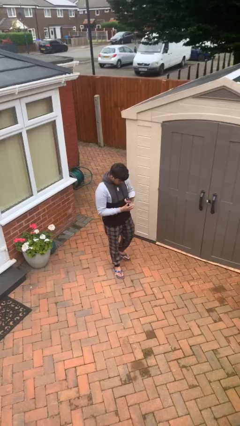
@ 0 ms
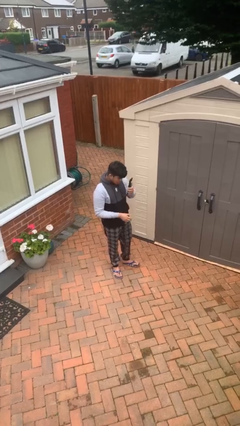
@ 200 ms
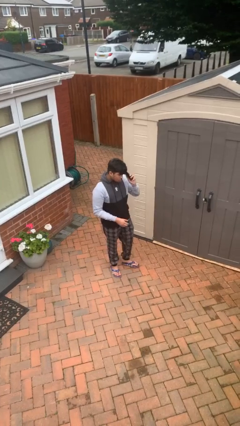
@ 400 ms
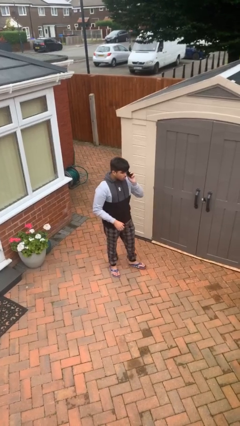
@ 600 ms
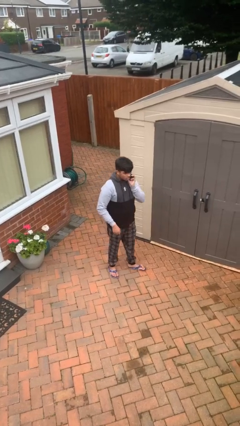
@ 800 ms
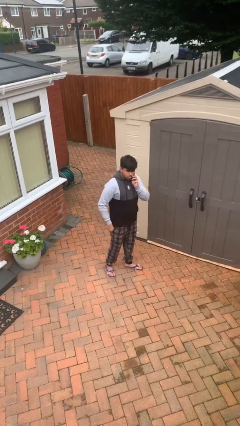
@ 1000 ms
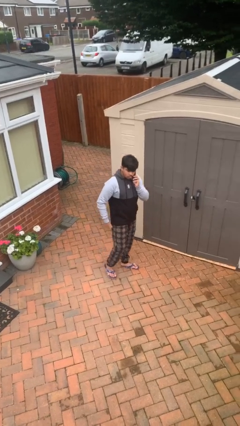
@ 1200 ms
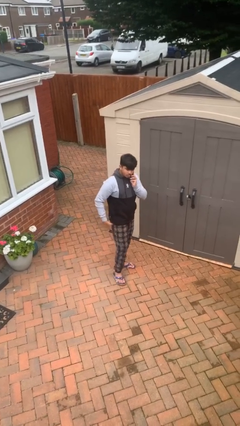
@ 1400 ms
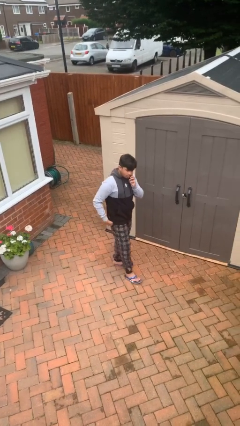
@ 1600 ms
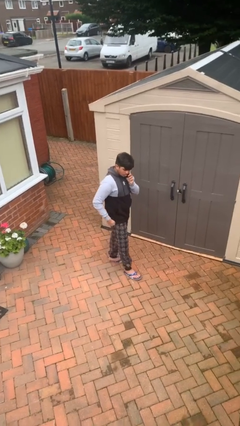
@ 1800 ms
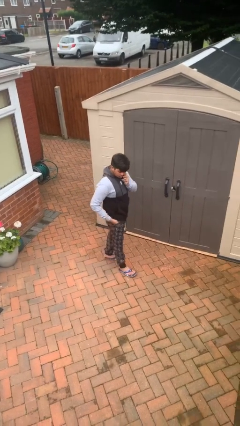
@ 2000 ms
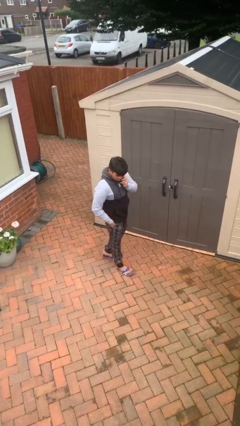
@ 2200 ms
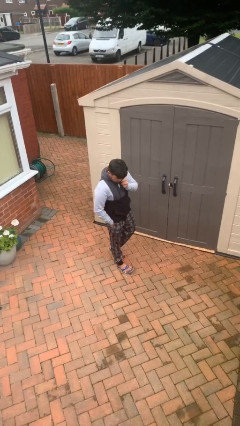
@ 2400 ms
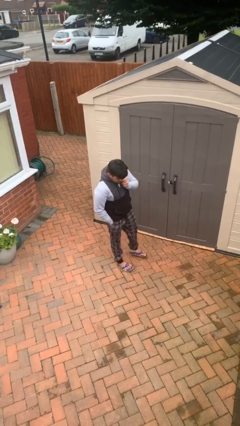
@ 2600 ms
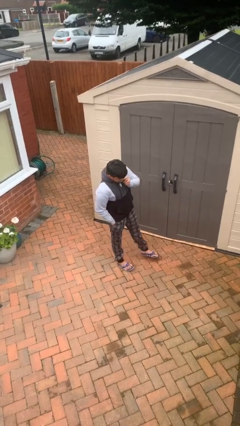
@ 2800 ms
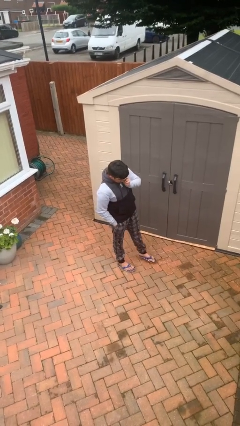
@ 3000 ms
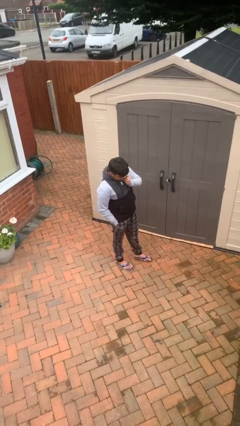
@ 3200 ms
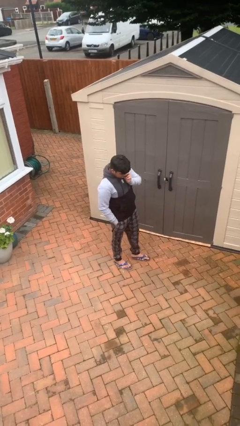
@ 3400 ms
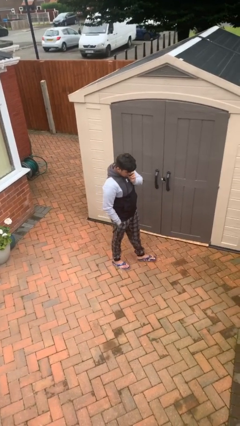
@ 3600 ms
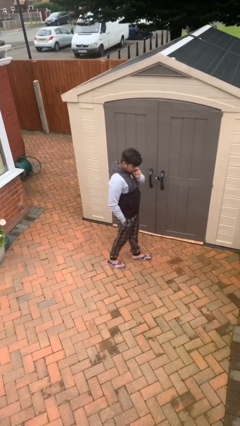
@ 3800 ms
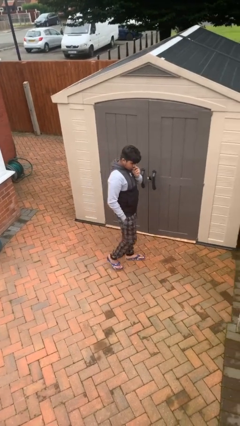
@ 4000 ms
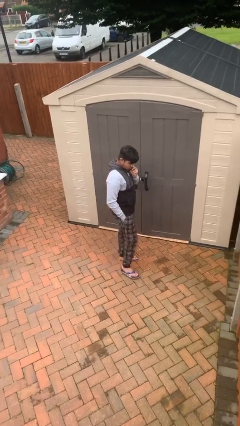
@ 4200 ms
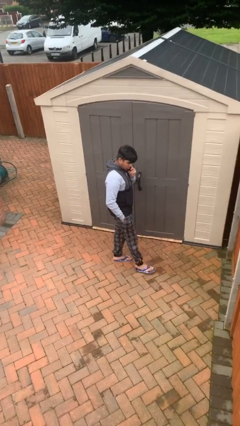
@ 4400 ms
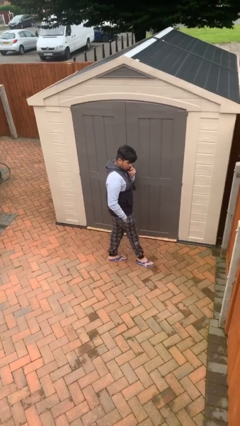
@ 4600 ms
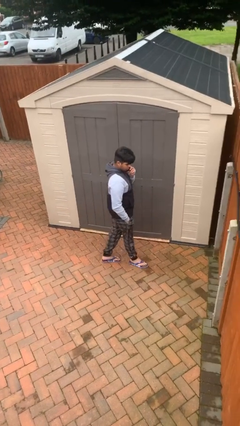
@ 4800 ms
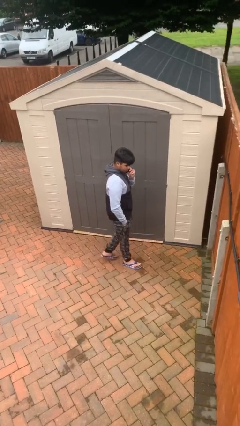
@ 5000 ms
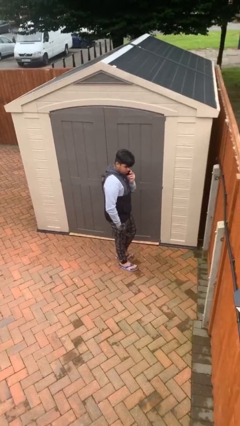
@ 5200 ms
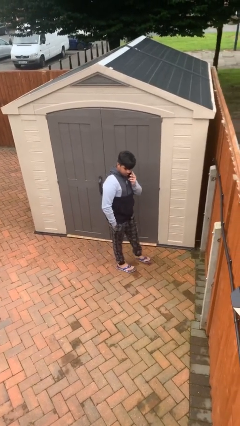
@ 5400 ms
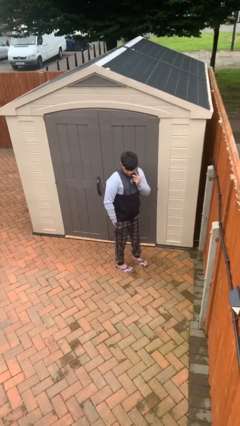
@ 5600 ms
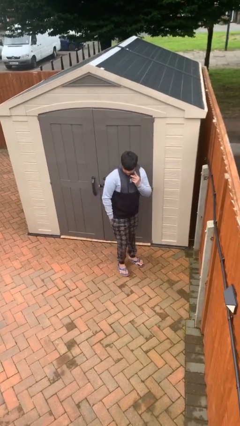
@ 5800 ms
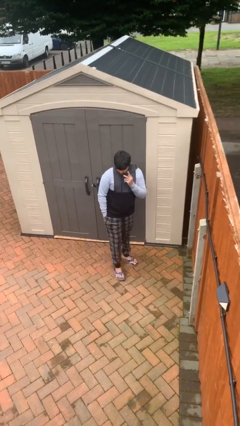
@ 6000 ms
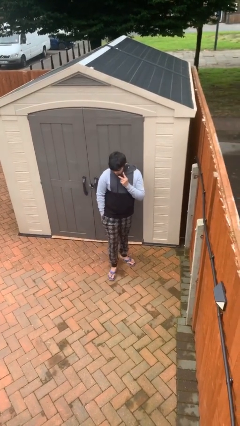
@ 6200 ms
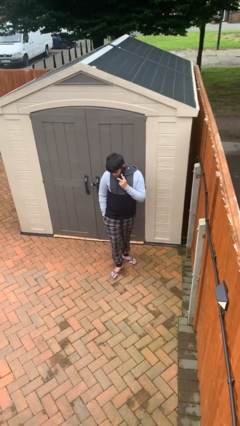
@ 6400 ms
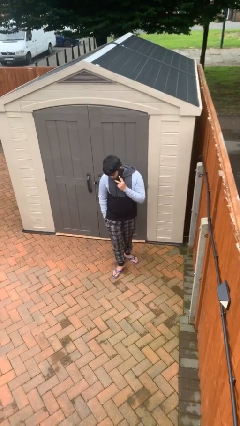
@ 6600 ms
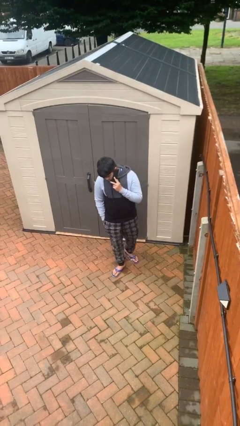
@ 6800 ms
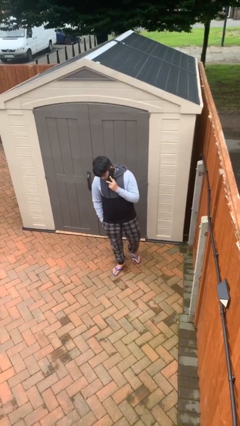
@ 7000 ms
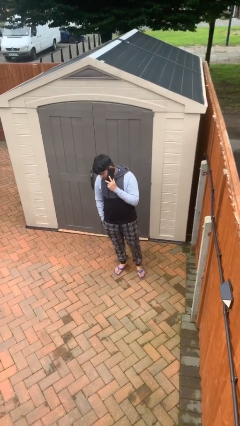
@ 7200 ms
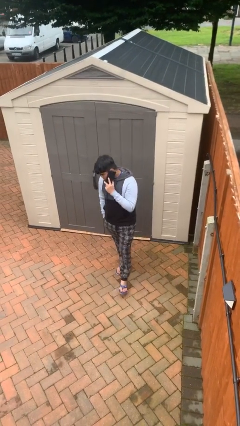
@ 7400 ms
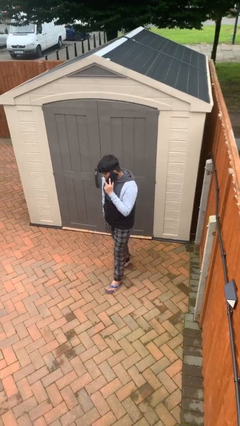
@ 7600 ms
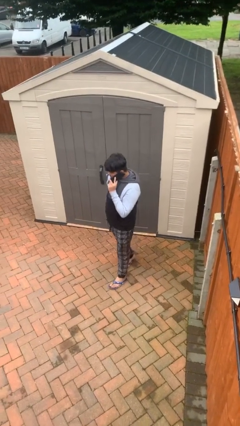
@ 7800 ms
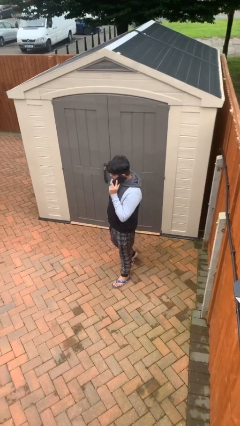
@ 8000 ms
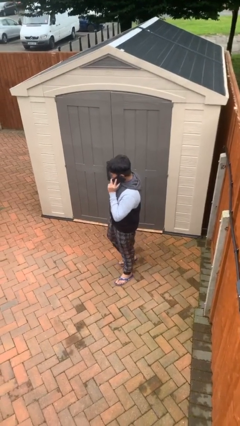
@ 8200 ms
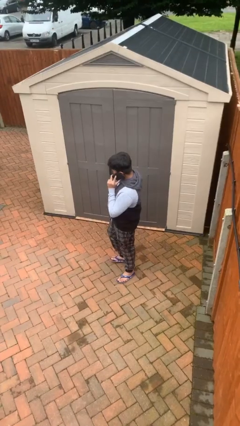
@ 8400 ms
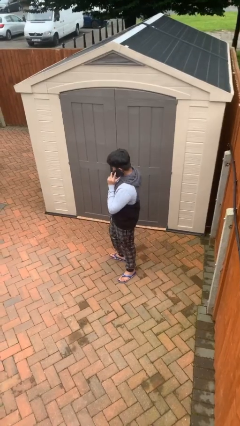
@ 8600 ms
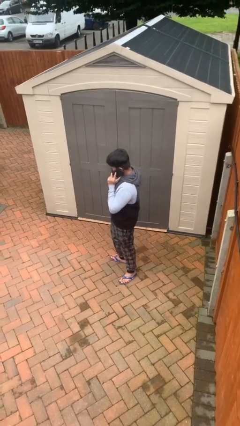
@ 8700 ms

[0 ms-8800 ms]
person talks on phone

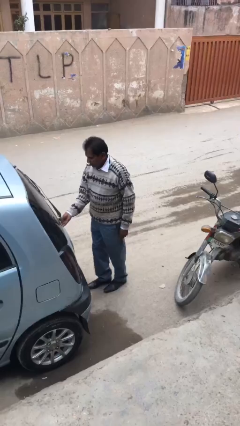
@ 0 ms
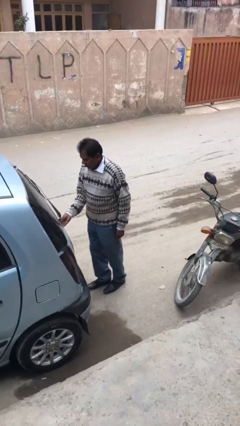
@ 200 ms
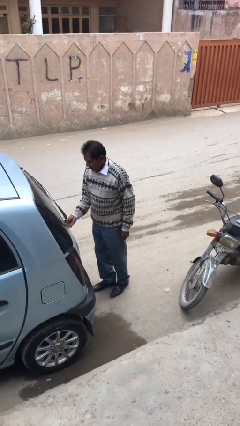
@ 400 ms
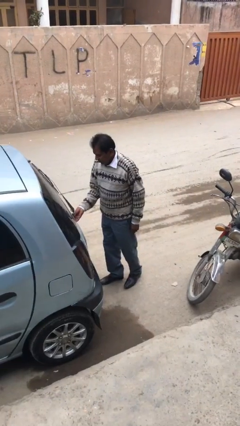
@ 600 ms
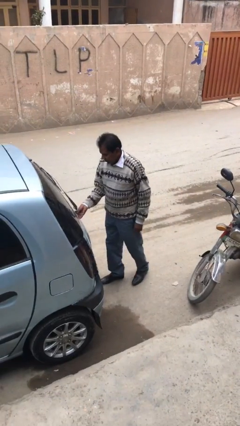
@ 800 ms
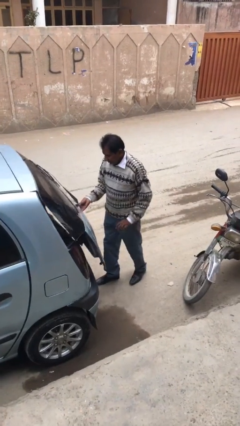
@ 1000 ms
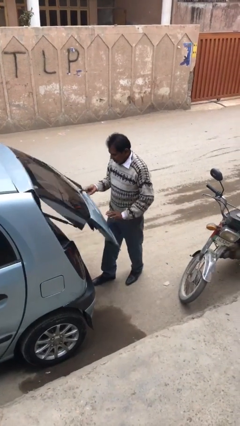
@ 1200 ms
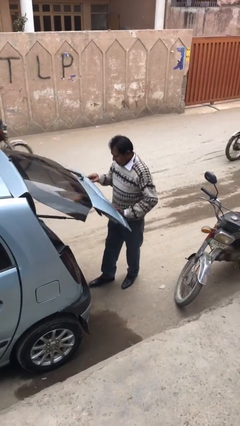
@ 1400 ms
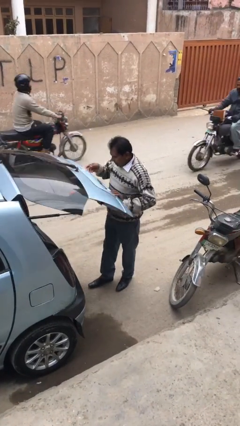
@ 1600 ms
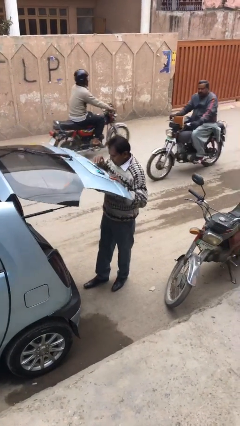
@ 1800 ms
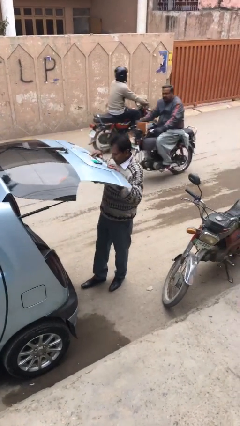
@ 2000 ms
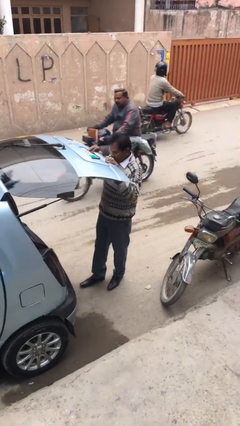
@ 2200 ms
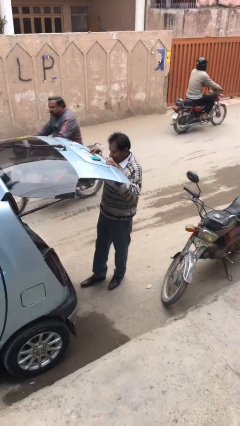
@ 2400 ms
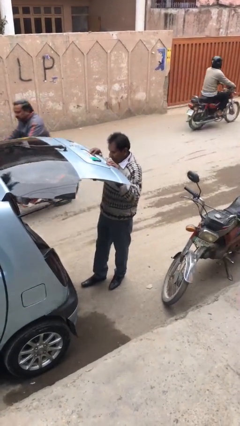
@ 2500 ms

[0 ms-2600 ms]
person opens car trunk

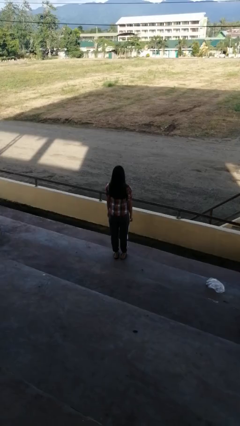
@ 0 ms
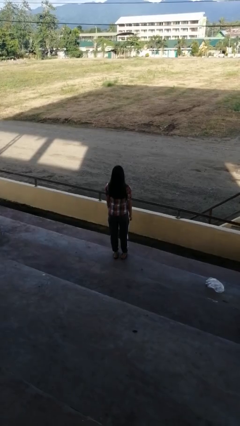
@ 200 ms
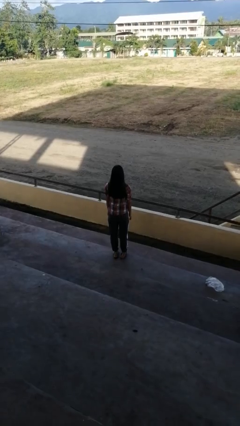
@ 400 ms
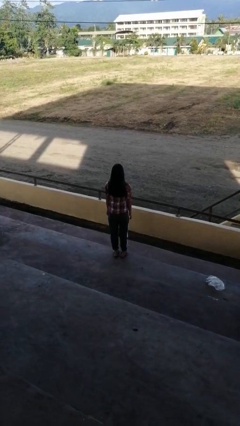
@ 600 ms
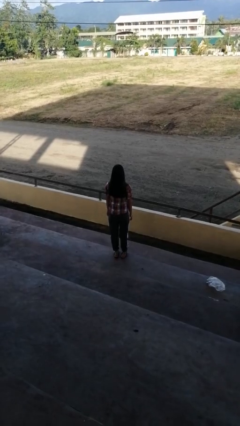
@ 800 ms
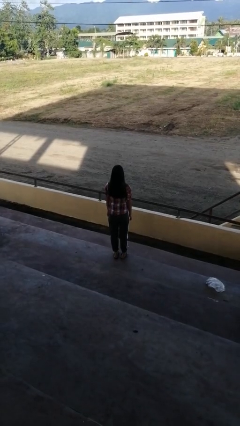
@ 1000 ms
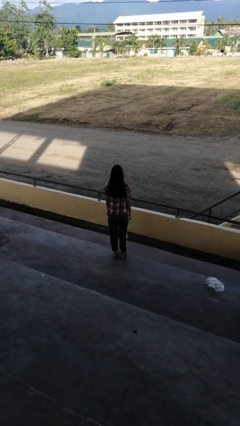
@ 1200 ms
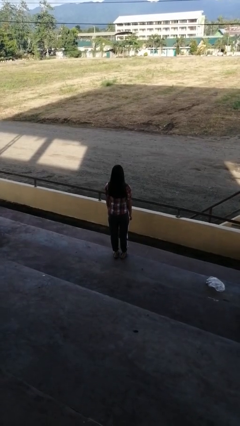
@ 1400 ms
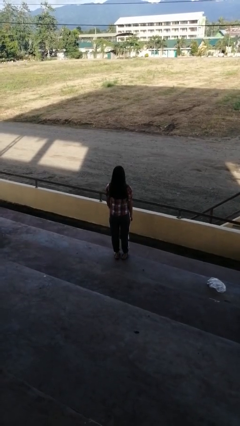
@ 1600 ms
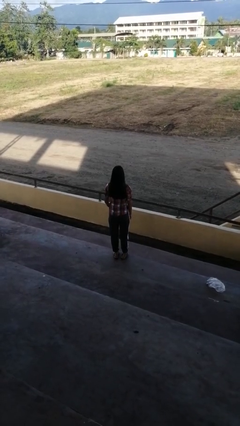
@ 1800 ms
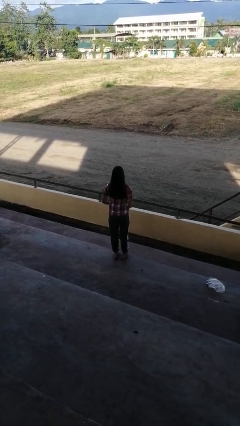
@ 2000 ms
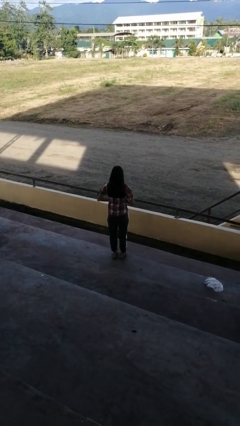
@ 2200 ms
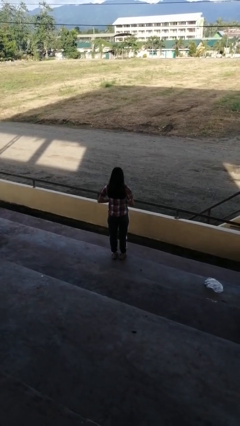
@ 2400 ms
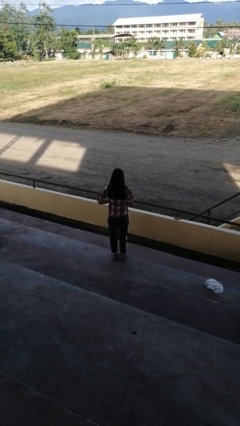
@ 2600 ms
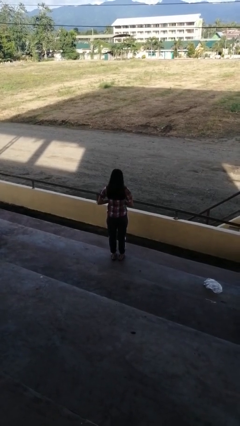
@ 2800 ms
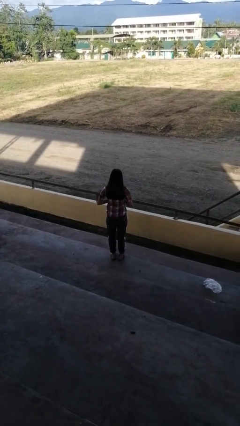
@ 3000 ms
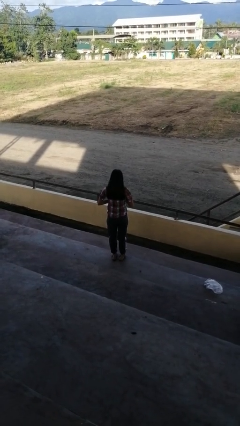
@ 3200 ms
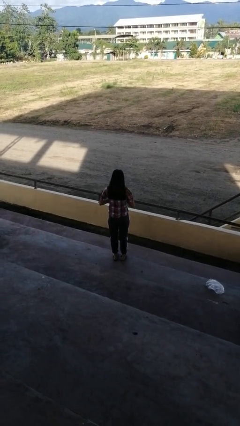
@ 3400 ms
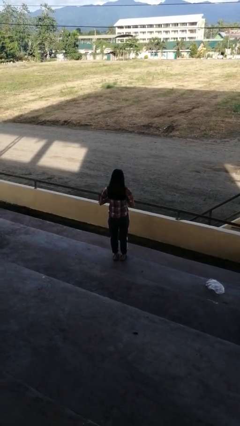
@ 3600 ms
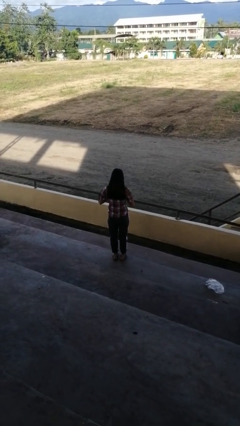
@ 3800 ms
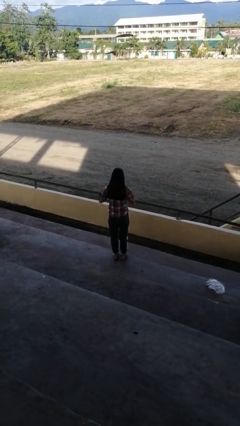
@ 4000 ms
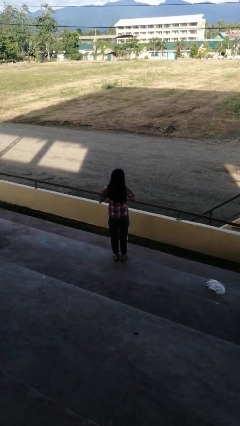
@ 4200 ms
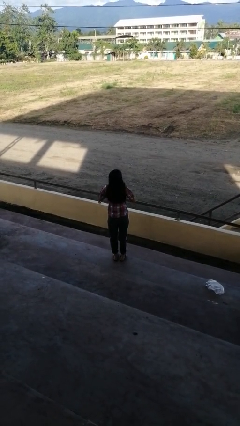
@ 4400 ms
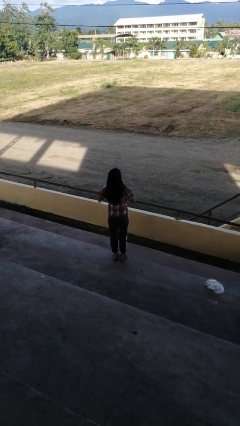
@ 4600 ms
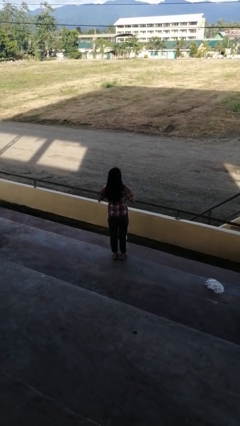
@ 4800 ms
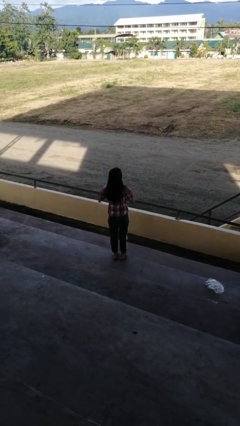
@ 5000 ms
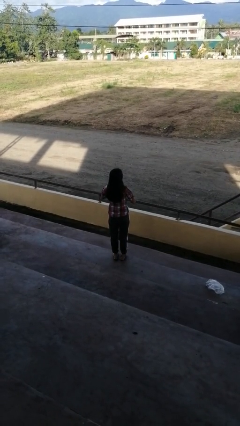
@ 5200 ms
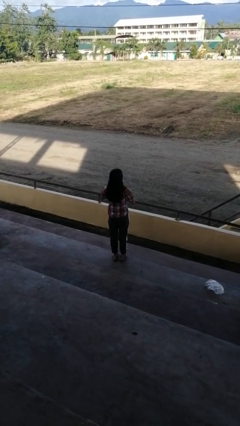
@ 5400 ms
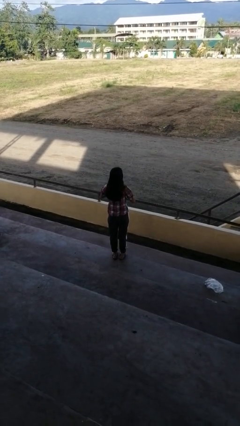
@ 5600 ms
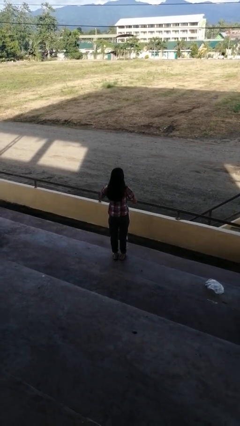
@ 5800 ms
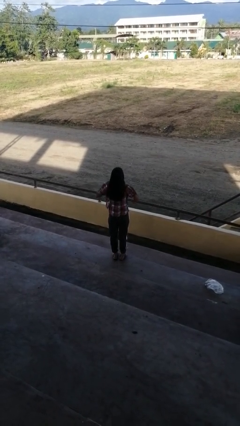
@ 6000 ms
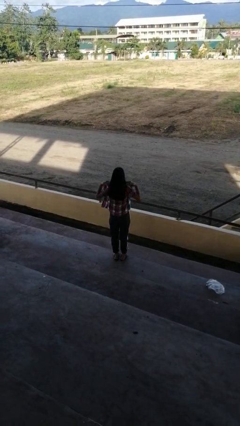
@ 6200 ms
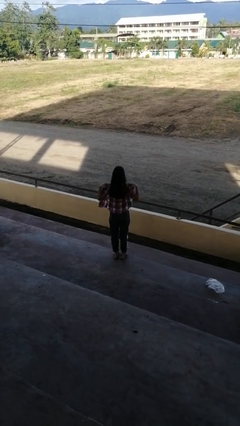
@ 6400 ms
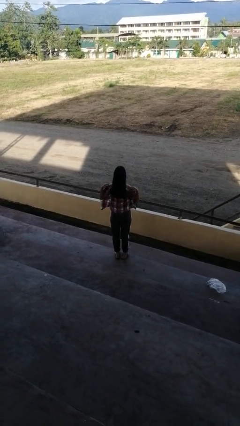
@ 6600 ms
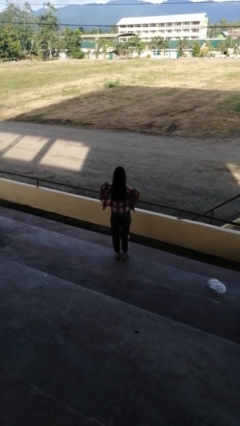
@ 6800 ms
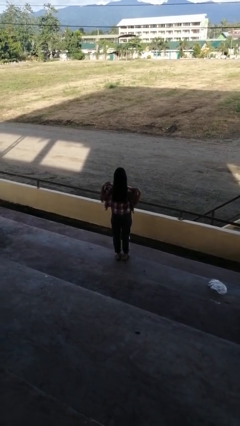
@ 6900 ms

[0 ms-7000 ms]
person unbuttons shirt
